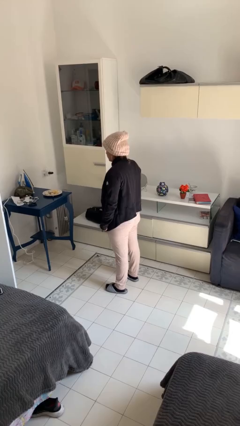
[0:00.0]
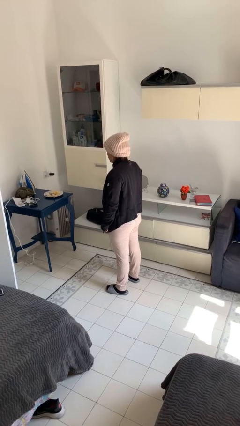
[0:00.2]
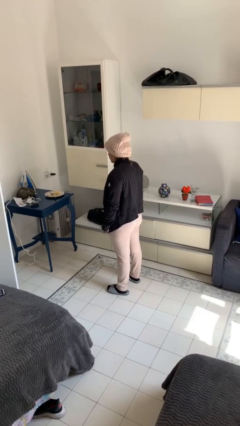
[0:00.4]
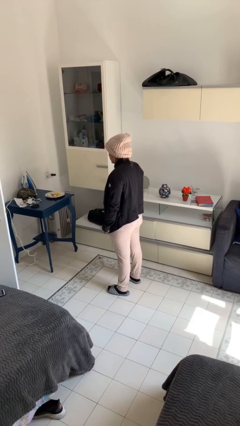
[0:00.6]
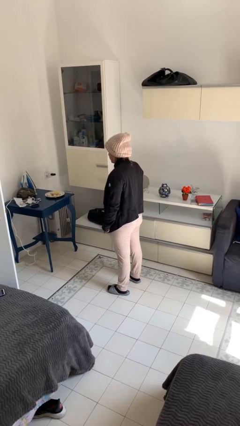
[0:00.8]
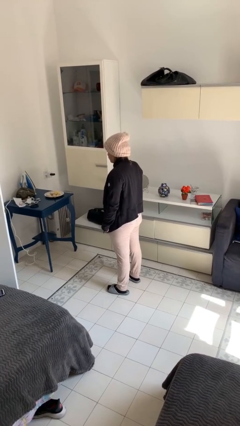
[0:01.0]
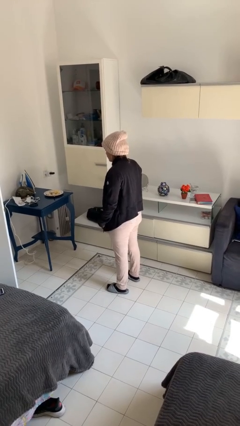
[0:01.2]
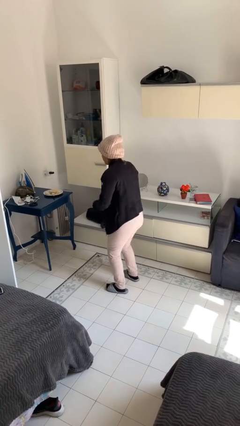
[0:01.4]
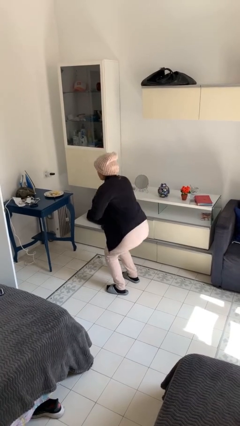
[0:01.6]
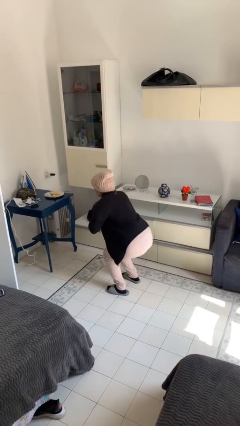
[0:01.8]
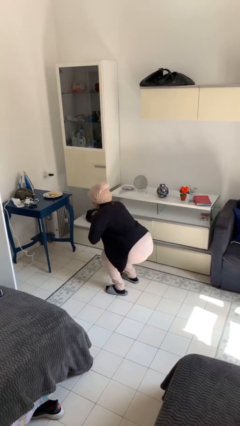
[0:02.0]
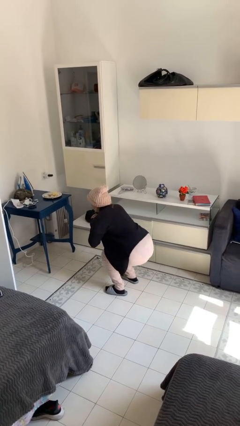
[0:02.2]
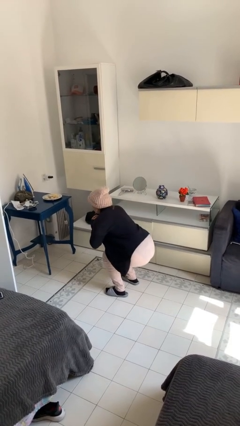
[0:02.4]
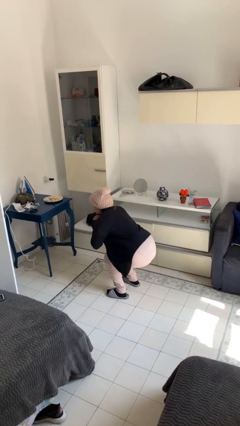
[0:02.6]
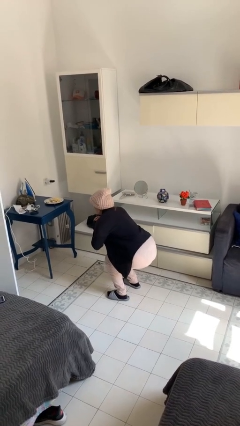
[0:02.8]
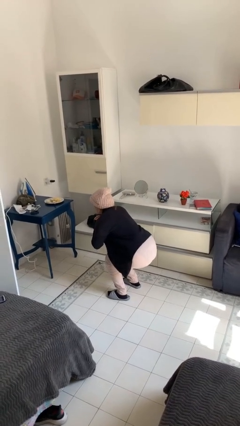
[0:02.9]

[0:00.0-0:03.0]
person squats

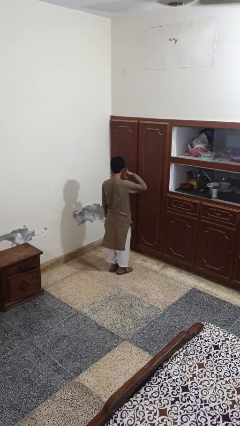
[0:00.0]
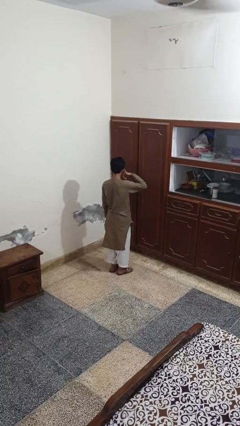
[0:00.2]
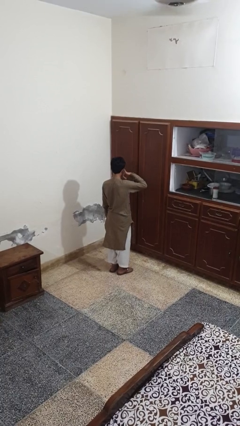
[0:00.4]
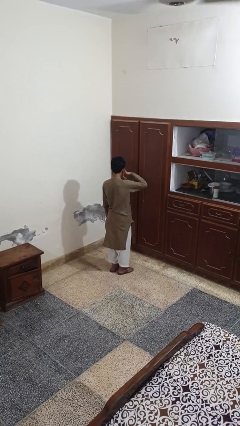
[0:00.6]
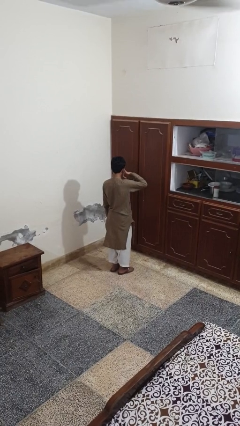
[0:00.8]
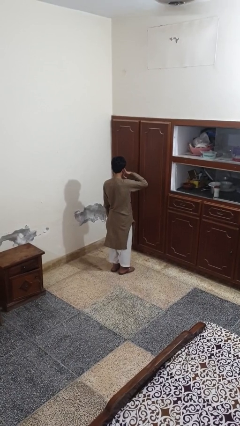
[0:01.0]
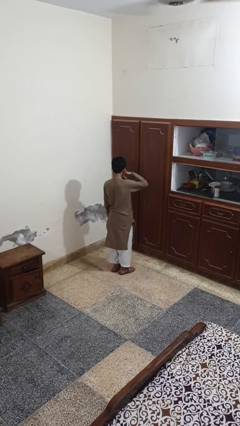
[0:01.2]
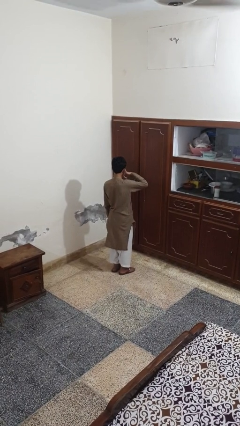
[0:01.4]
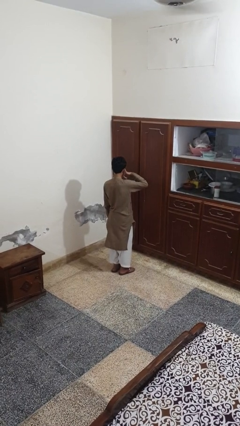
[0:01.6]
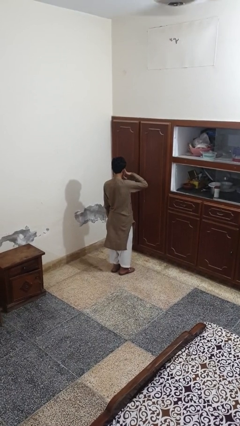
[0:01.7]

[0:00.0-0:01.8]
person gestures call me

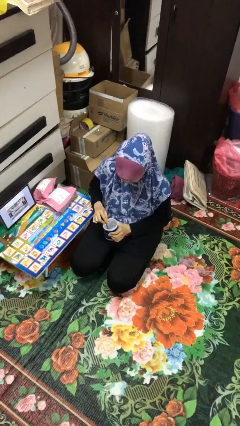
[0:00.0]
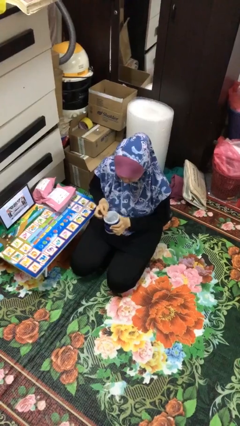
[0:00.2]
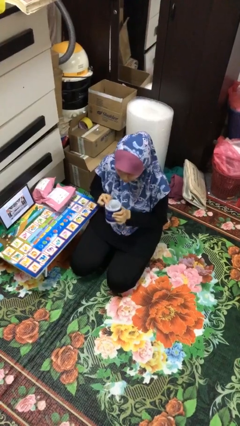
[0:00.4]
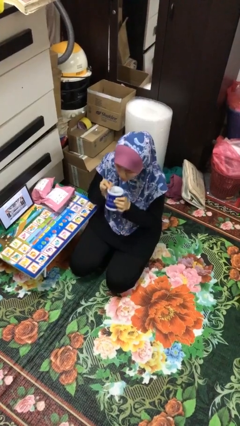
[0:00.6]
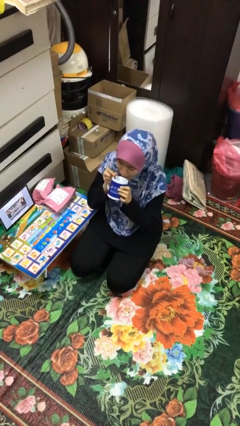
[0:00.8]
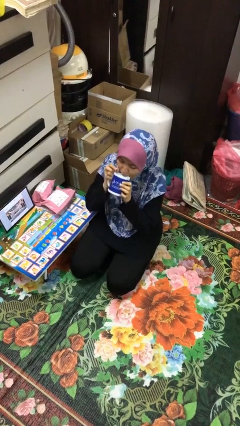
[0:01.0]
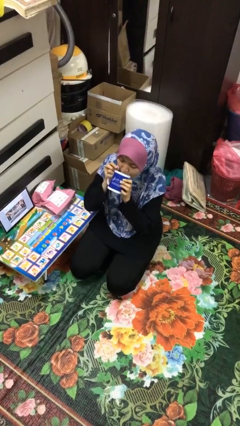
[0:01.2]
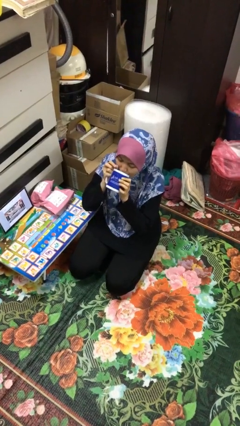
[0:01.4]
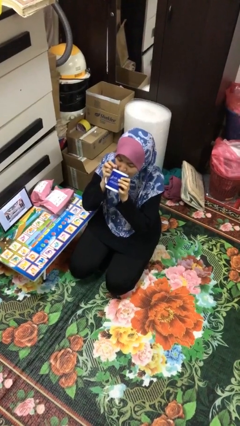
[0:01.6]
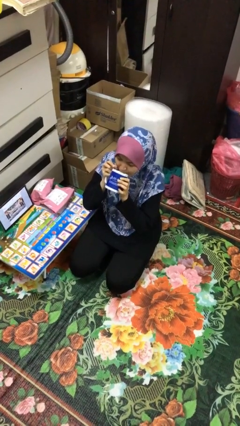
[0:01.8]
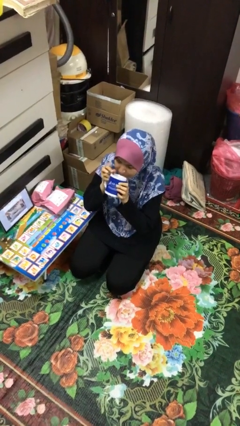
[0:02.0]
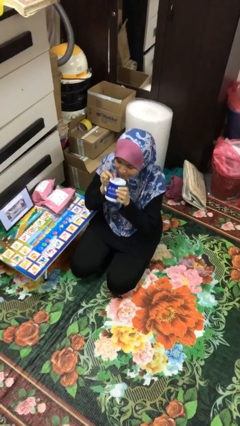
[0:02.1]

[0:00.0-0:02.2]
person drinks from mug

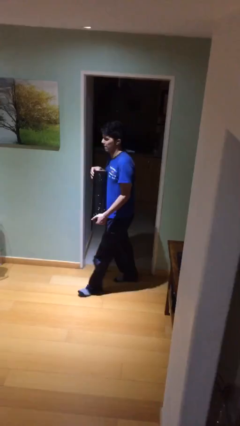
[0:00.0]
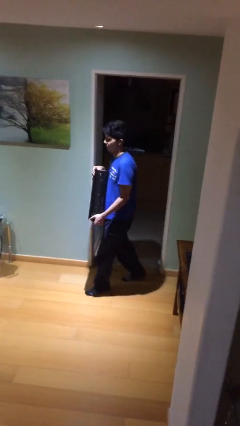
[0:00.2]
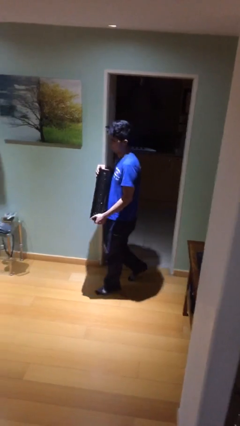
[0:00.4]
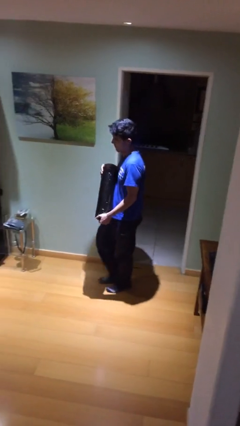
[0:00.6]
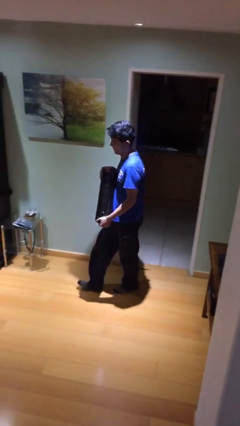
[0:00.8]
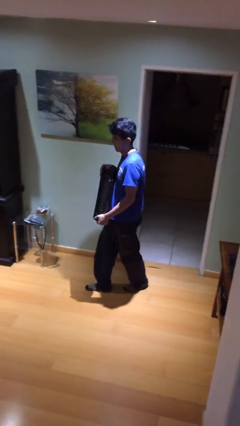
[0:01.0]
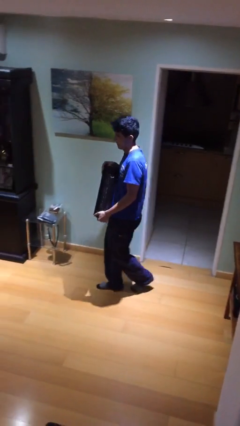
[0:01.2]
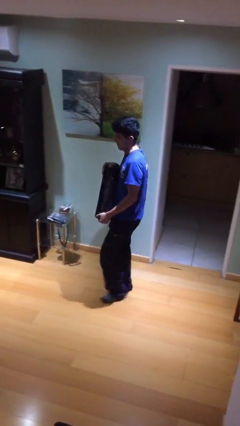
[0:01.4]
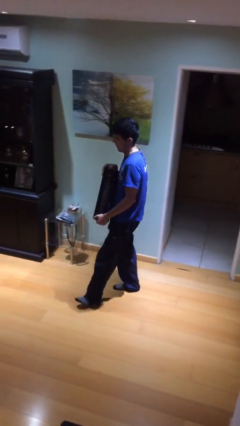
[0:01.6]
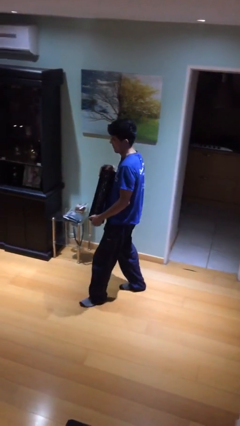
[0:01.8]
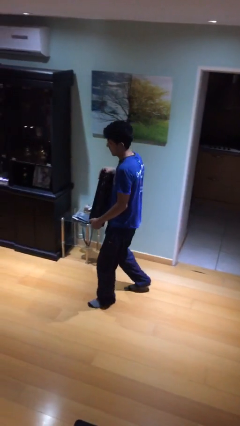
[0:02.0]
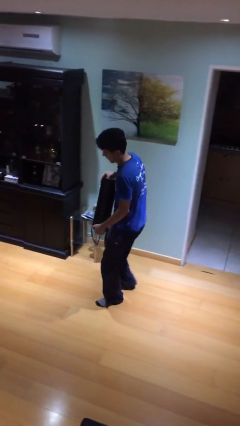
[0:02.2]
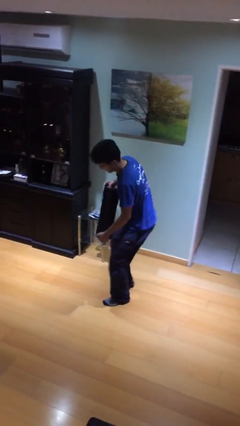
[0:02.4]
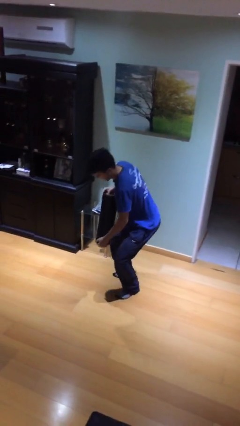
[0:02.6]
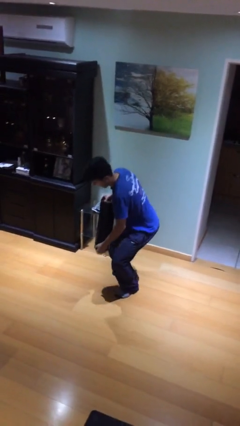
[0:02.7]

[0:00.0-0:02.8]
person carries heavy object

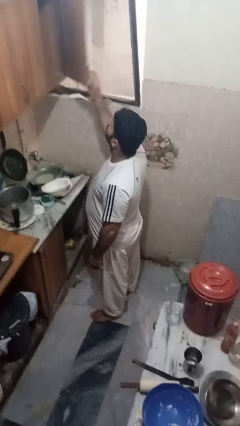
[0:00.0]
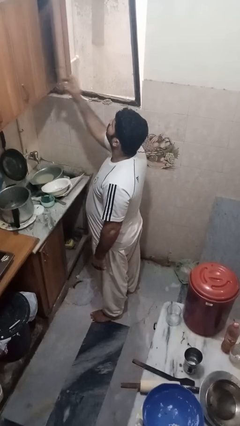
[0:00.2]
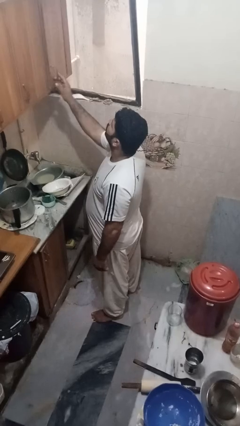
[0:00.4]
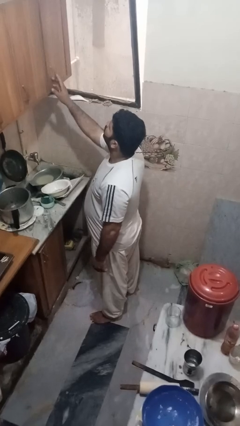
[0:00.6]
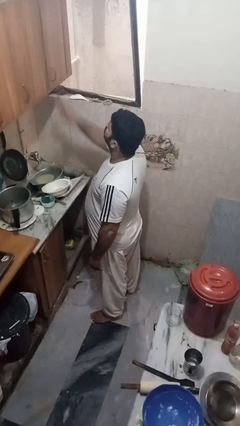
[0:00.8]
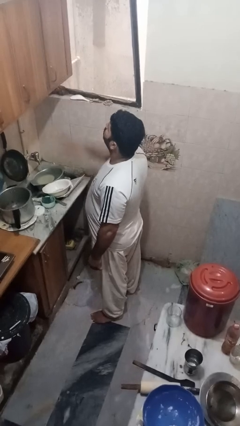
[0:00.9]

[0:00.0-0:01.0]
person closes cabinet

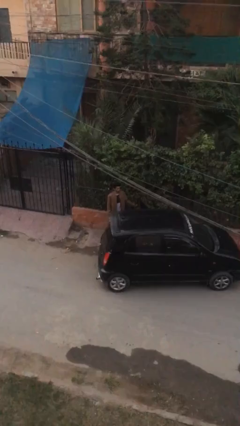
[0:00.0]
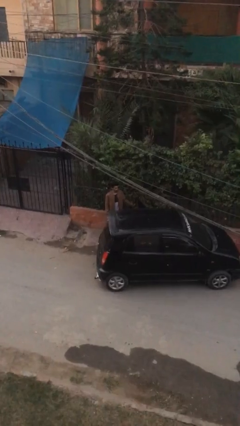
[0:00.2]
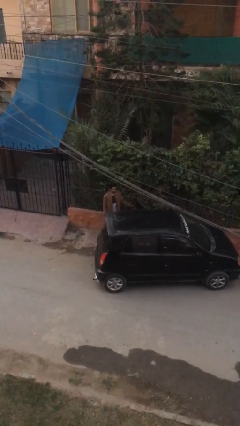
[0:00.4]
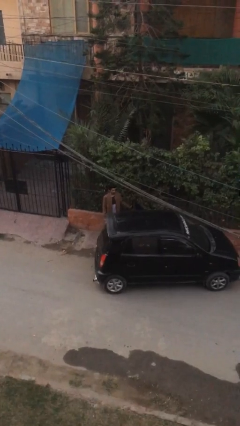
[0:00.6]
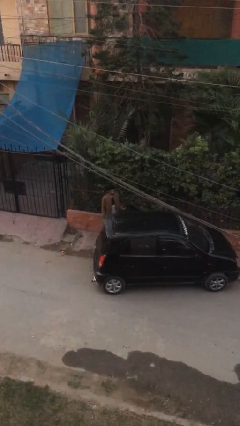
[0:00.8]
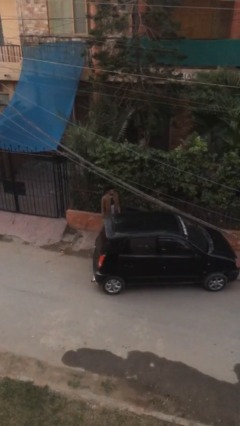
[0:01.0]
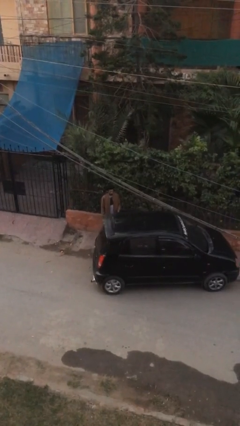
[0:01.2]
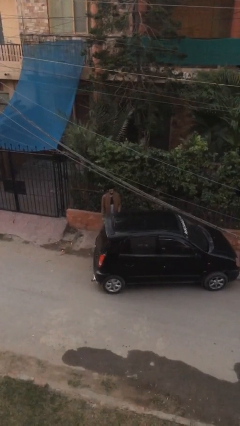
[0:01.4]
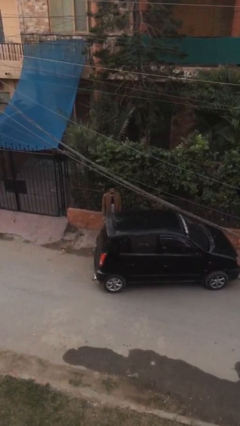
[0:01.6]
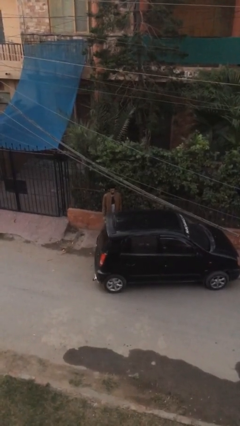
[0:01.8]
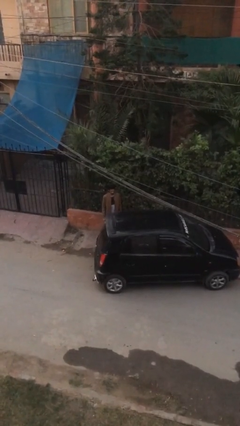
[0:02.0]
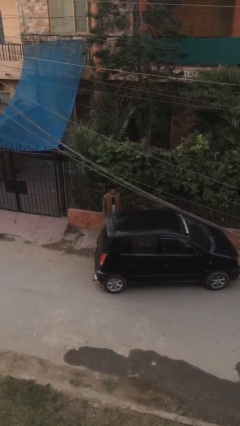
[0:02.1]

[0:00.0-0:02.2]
person closes car door

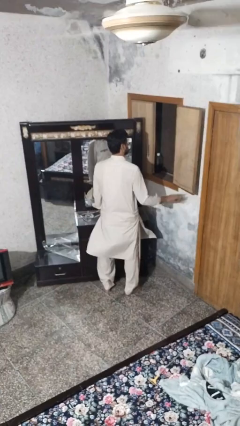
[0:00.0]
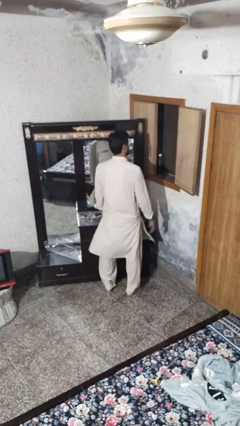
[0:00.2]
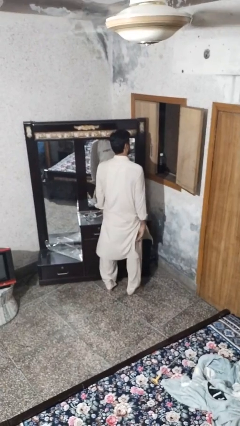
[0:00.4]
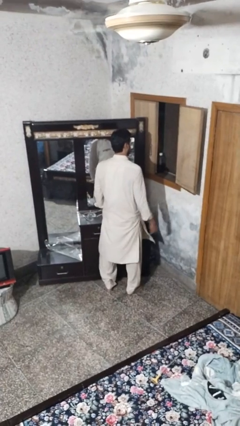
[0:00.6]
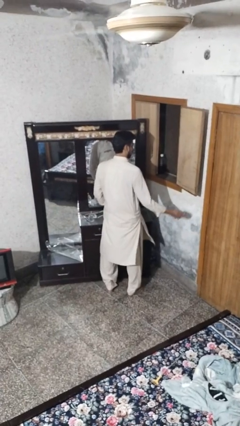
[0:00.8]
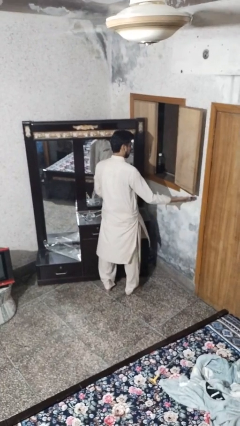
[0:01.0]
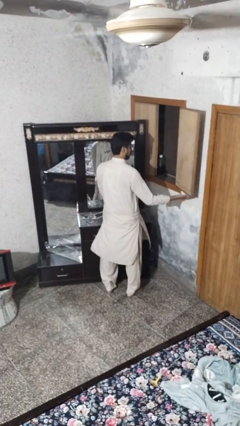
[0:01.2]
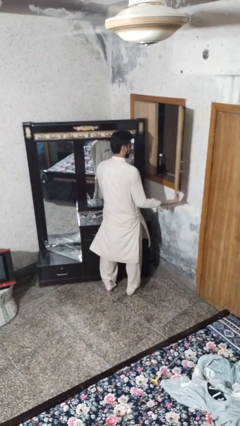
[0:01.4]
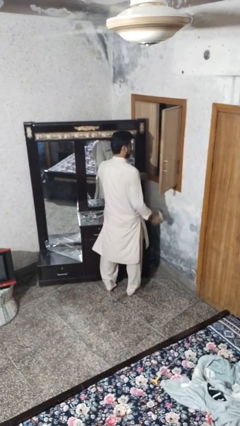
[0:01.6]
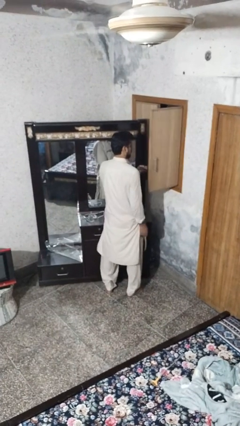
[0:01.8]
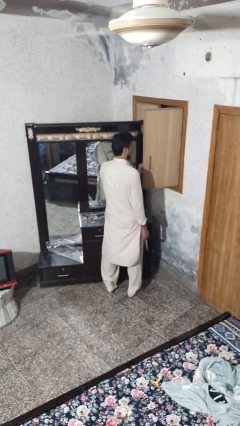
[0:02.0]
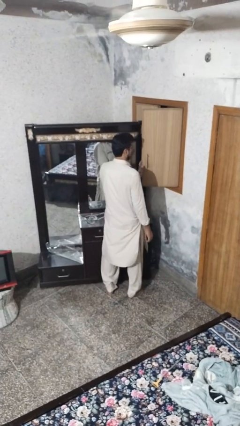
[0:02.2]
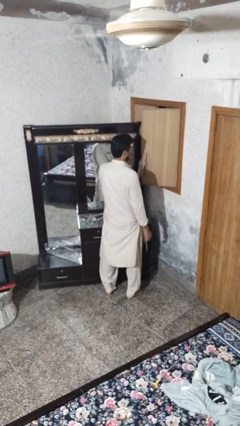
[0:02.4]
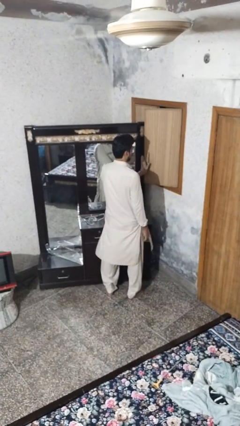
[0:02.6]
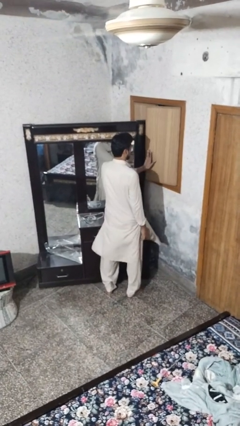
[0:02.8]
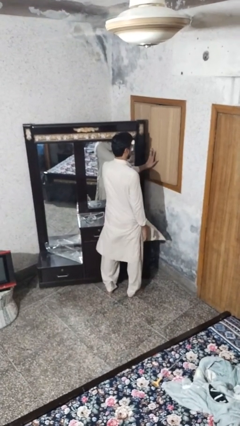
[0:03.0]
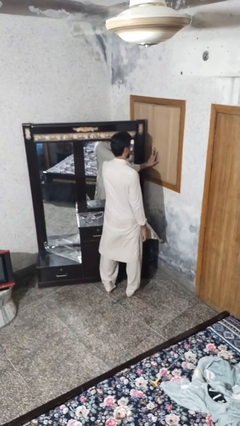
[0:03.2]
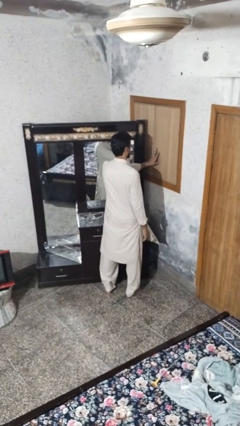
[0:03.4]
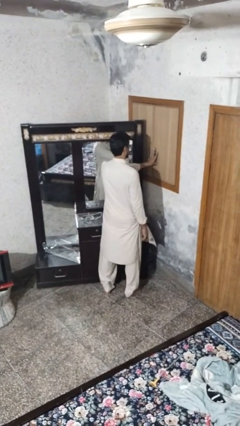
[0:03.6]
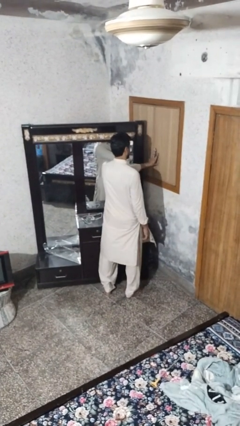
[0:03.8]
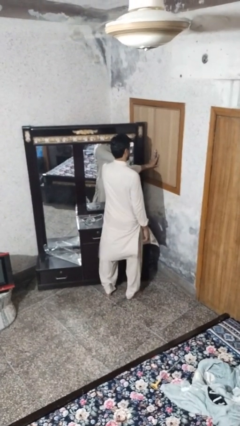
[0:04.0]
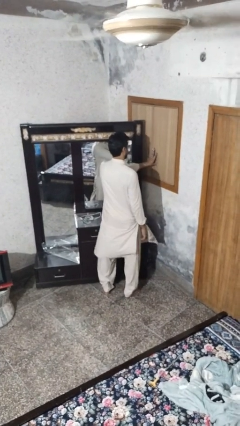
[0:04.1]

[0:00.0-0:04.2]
person closes home window

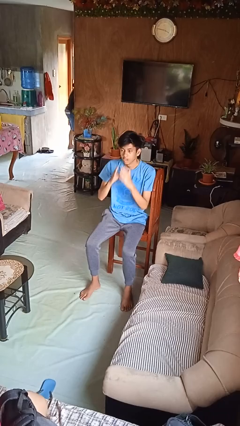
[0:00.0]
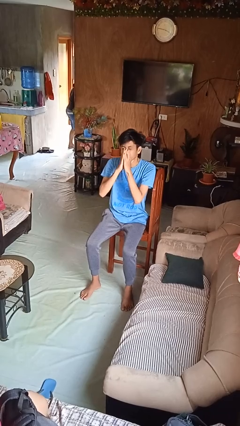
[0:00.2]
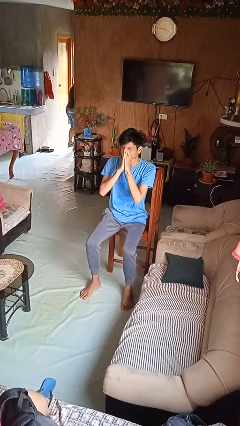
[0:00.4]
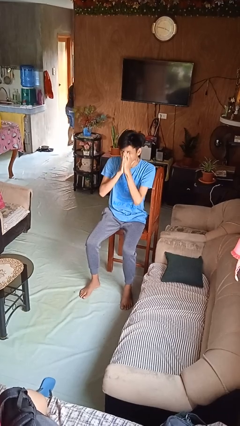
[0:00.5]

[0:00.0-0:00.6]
person sneezes into hand
